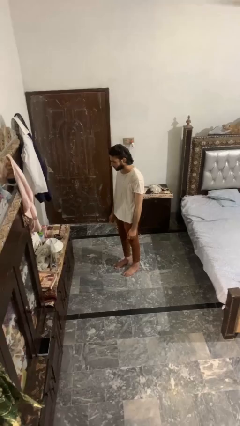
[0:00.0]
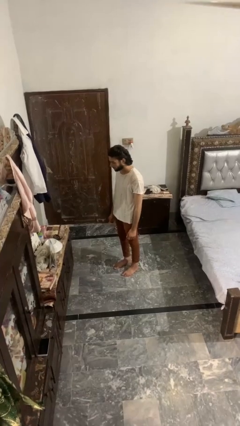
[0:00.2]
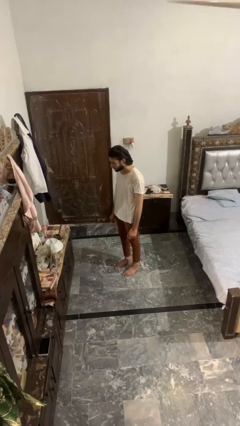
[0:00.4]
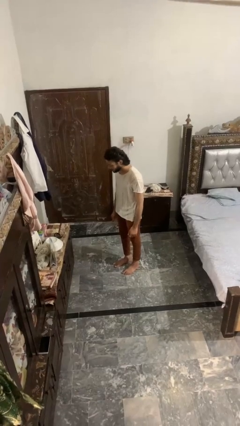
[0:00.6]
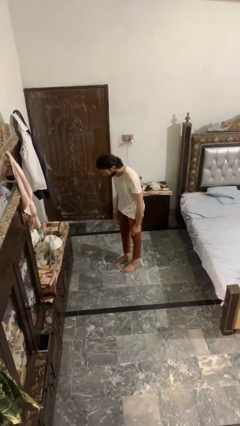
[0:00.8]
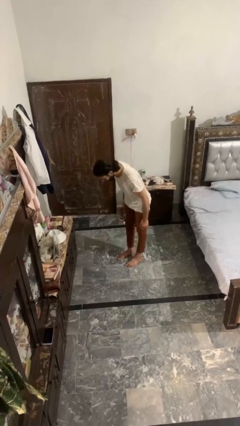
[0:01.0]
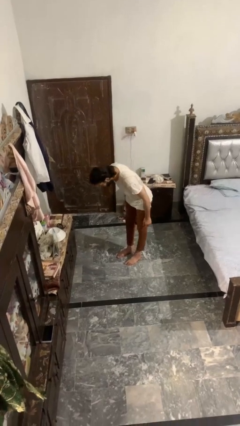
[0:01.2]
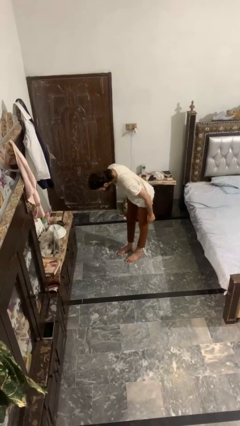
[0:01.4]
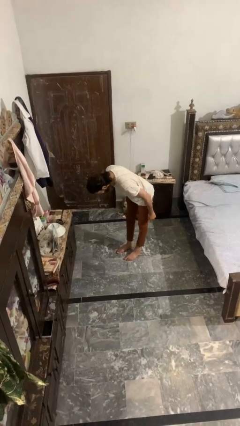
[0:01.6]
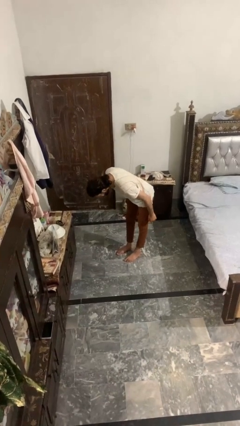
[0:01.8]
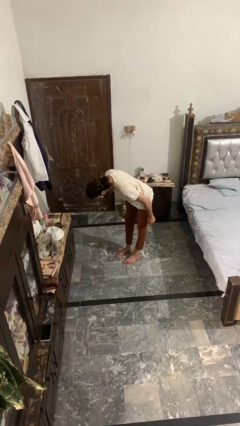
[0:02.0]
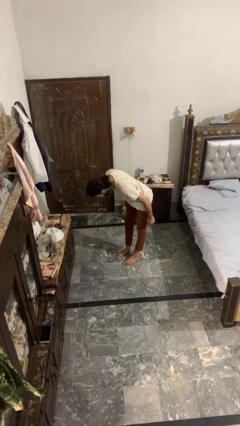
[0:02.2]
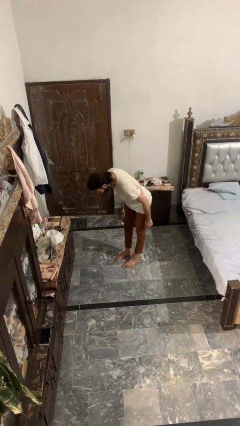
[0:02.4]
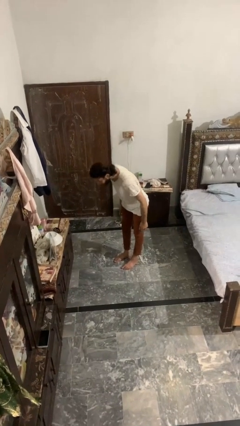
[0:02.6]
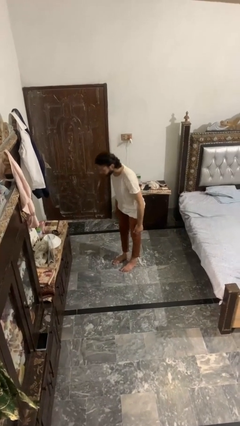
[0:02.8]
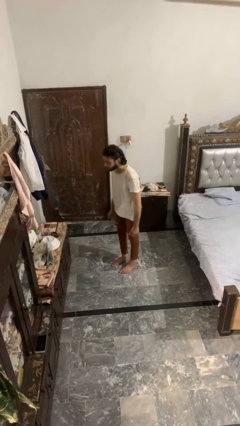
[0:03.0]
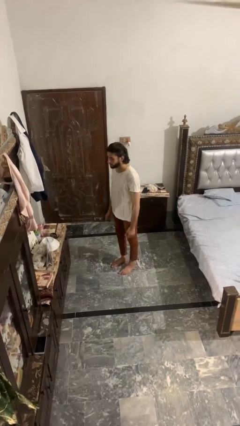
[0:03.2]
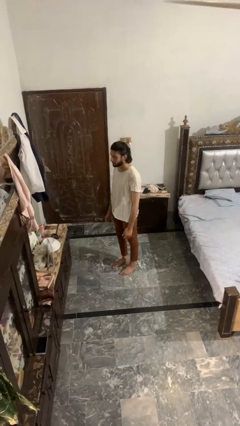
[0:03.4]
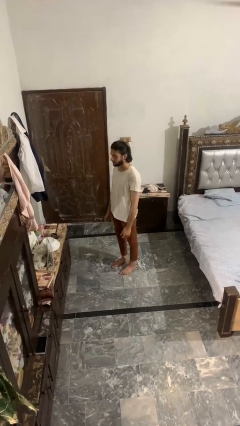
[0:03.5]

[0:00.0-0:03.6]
person bows

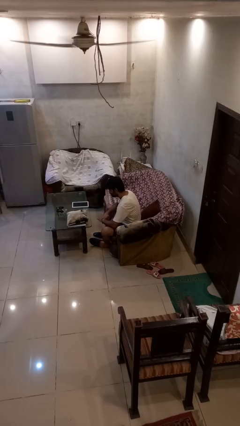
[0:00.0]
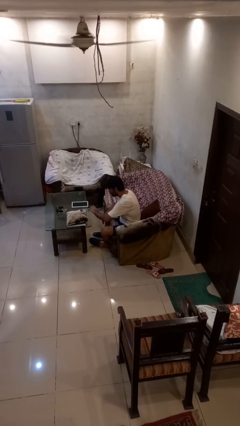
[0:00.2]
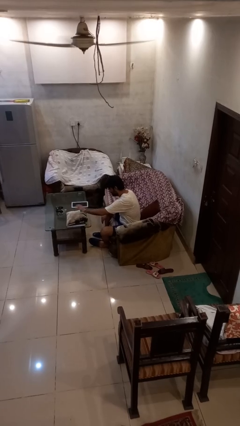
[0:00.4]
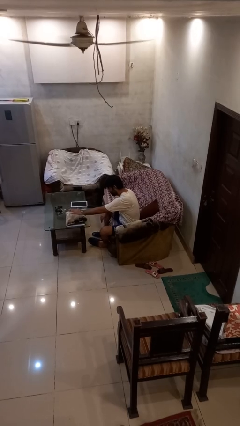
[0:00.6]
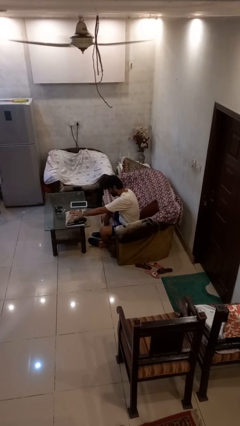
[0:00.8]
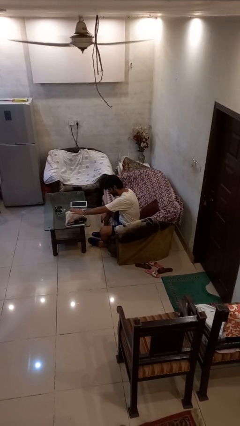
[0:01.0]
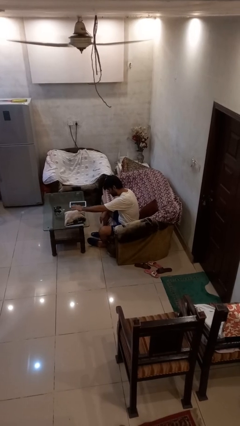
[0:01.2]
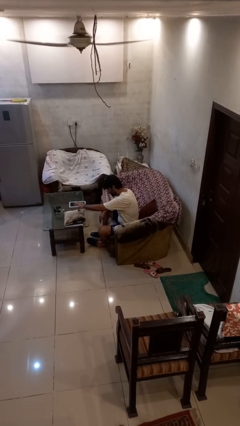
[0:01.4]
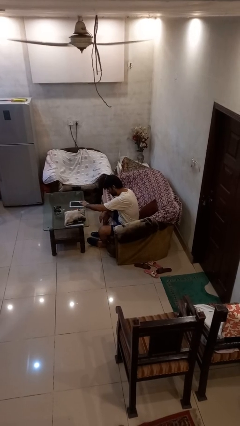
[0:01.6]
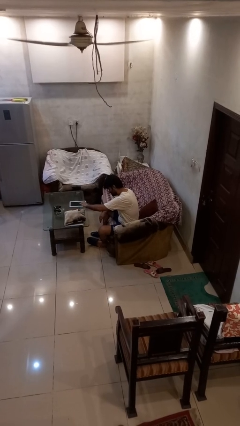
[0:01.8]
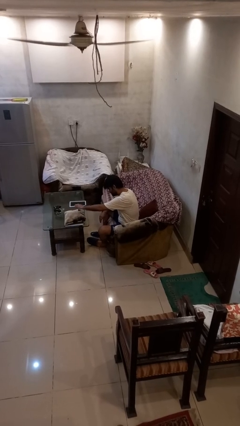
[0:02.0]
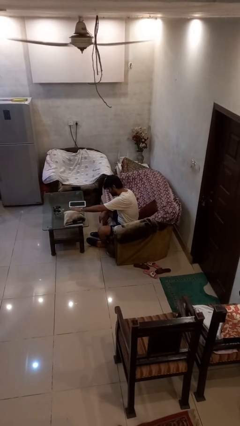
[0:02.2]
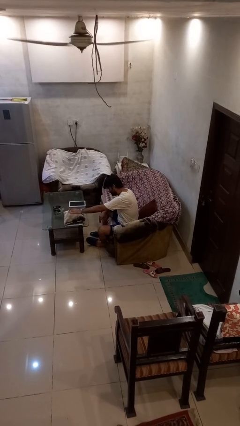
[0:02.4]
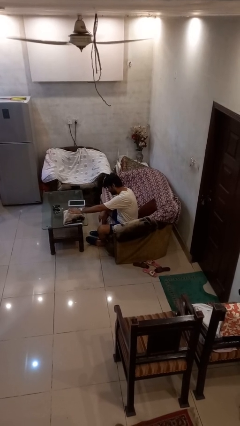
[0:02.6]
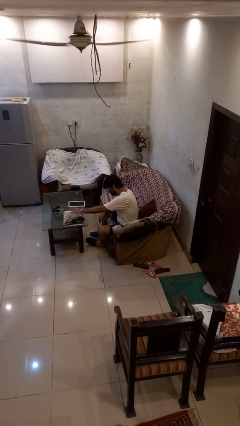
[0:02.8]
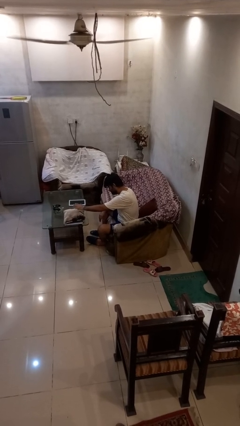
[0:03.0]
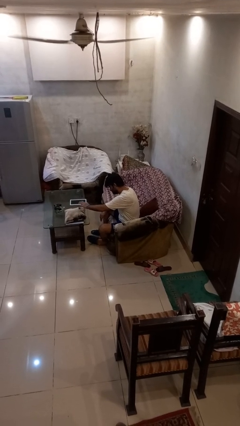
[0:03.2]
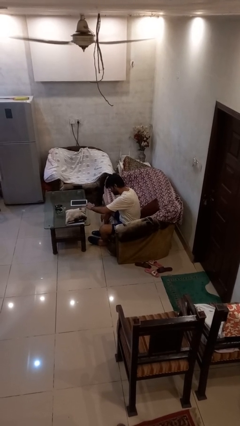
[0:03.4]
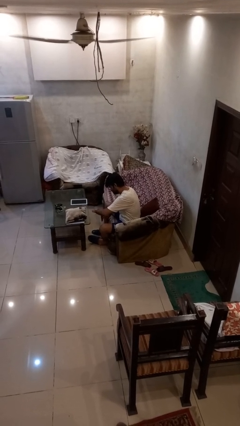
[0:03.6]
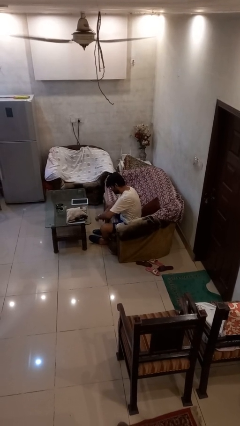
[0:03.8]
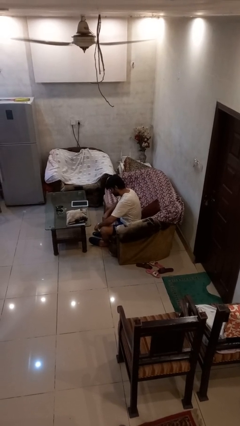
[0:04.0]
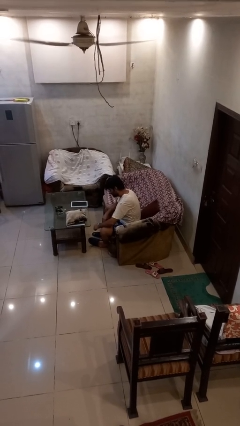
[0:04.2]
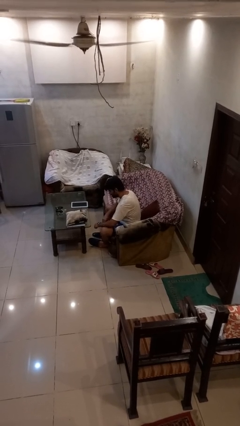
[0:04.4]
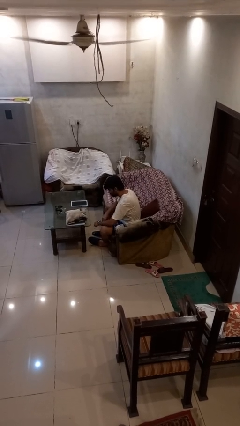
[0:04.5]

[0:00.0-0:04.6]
person waves hand over object

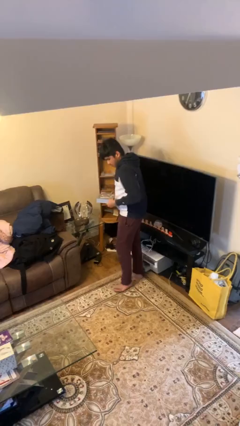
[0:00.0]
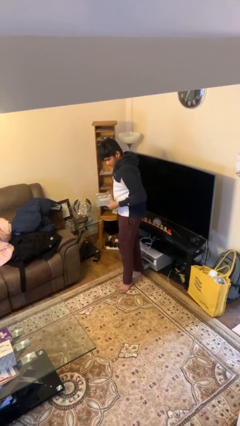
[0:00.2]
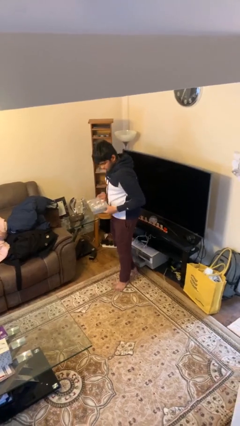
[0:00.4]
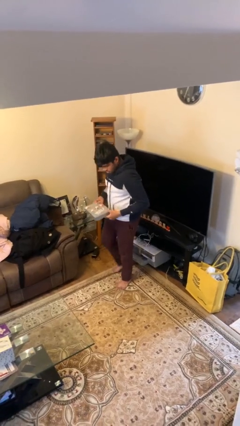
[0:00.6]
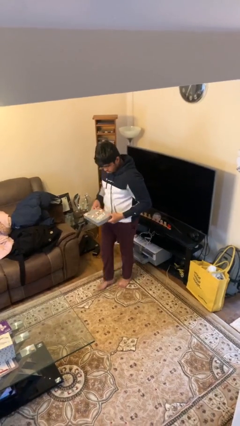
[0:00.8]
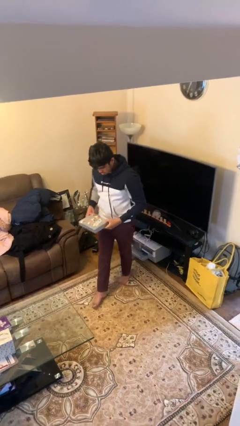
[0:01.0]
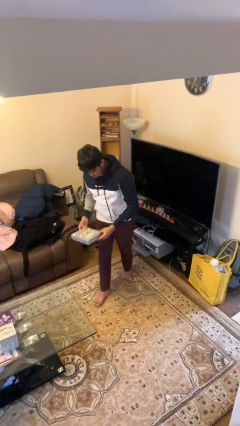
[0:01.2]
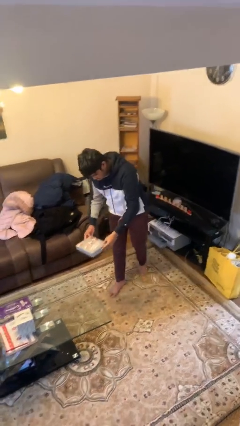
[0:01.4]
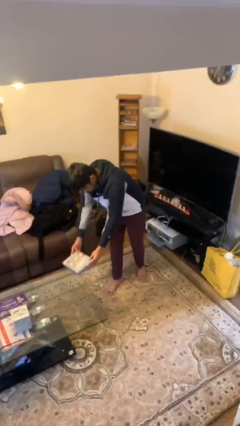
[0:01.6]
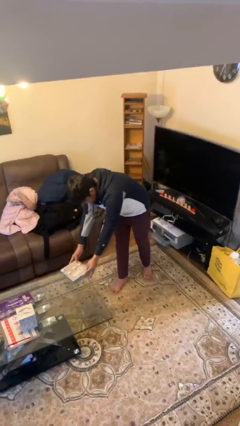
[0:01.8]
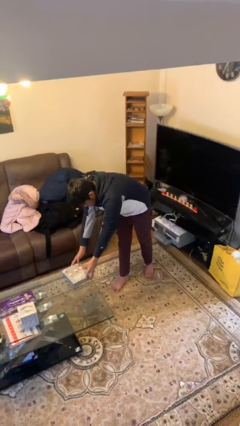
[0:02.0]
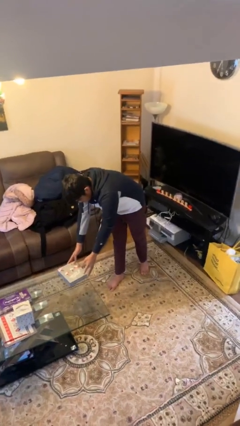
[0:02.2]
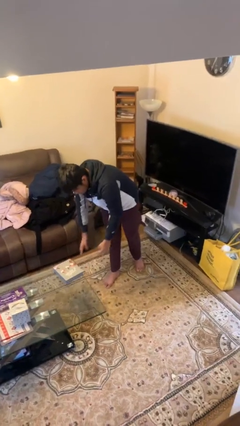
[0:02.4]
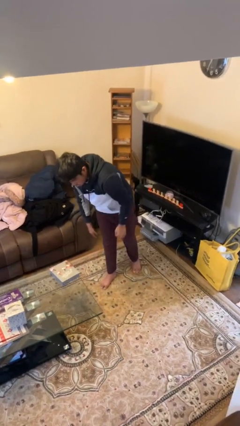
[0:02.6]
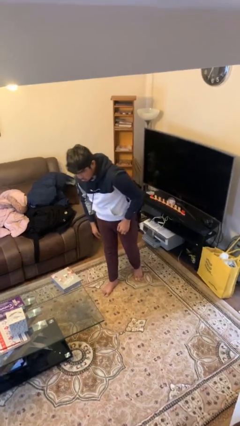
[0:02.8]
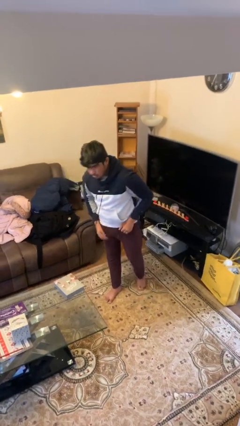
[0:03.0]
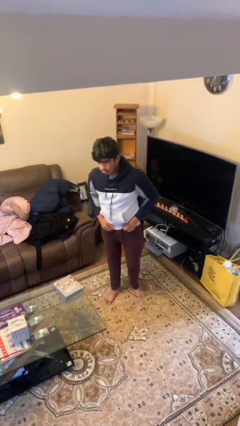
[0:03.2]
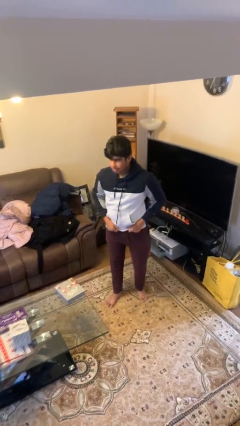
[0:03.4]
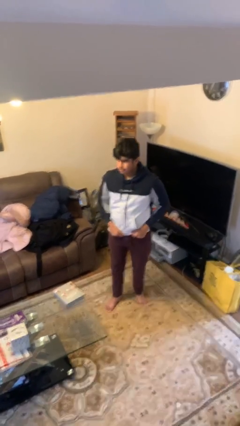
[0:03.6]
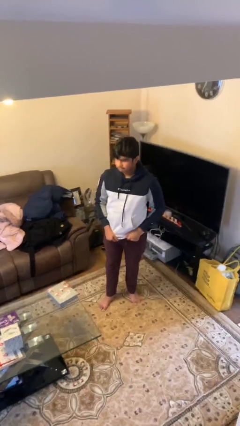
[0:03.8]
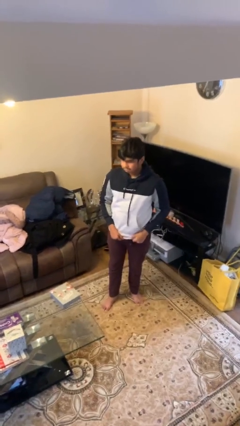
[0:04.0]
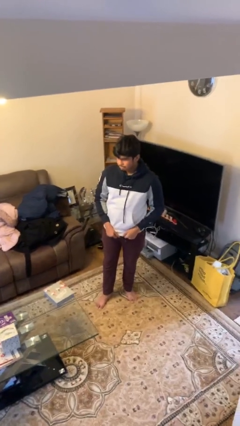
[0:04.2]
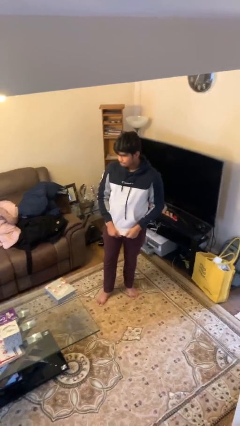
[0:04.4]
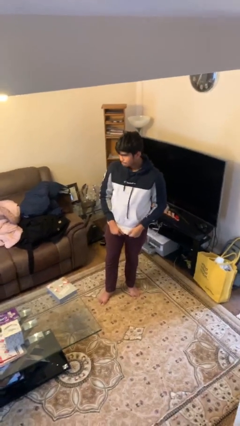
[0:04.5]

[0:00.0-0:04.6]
person puts down object on table

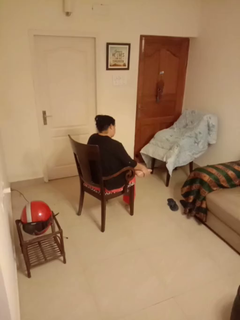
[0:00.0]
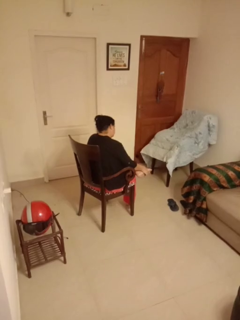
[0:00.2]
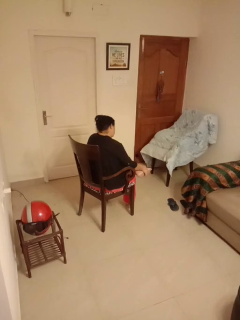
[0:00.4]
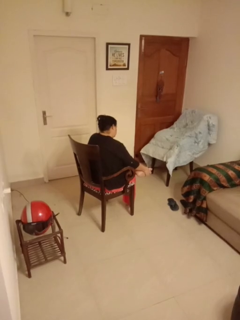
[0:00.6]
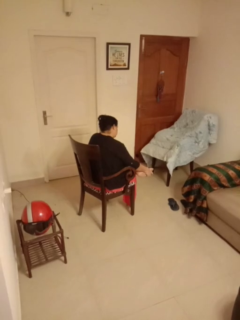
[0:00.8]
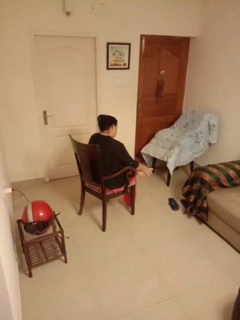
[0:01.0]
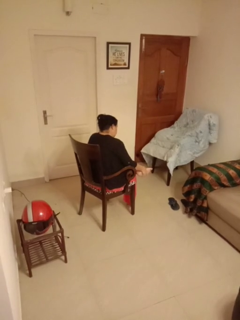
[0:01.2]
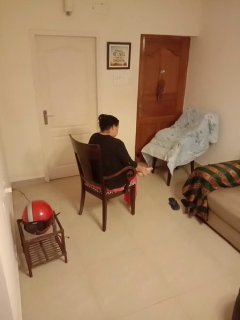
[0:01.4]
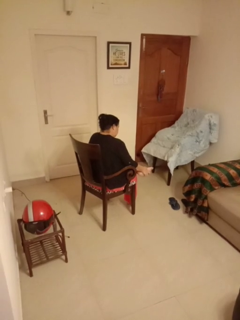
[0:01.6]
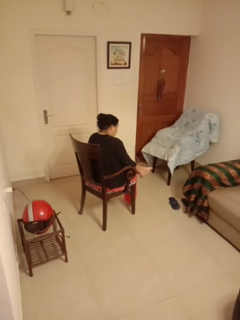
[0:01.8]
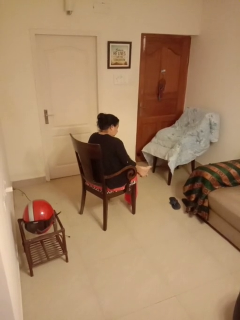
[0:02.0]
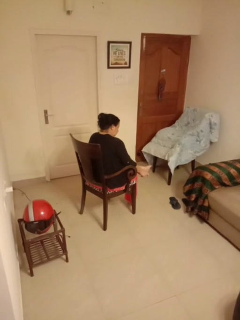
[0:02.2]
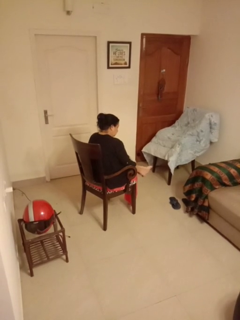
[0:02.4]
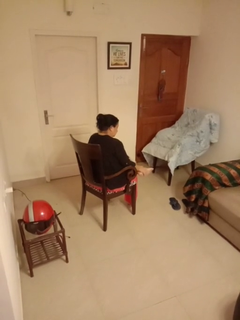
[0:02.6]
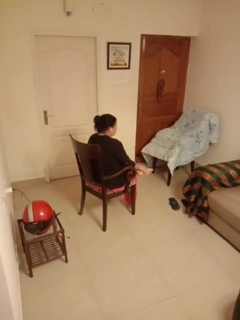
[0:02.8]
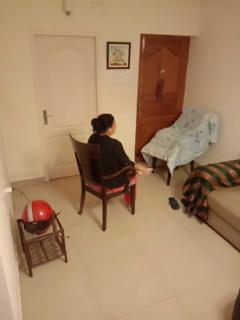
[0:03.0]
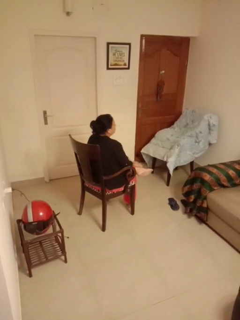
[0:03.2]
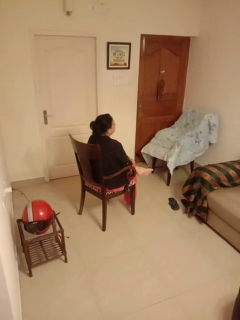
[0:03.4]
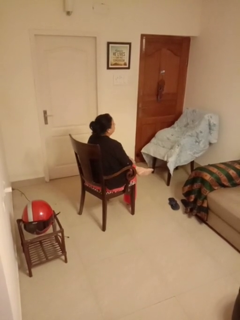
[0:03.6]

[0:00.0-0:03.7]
person rubs foot

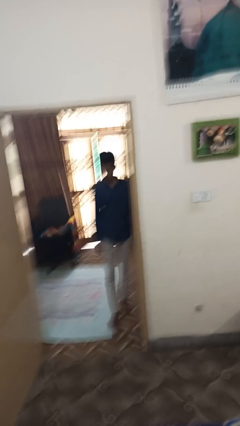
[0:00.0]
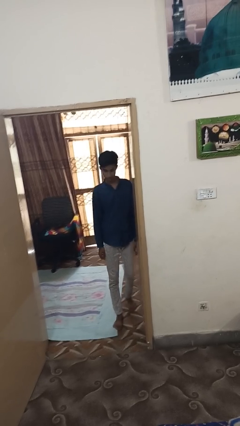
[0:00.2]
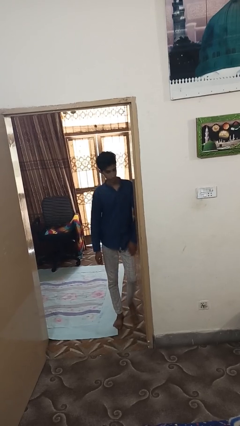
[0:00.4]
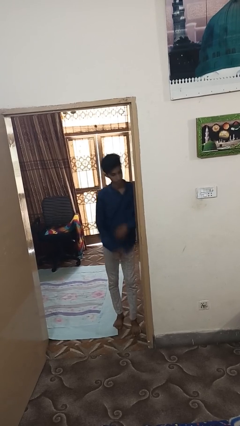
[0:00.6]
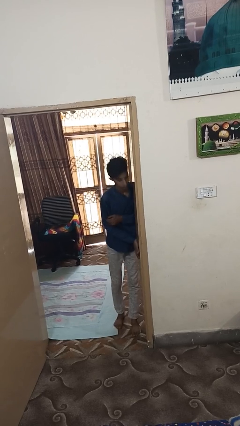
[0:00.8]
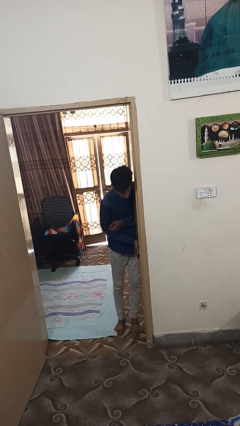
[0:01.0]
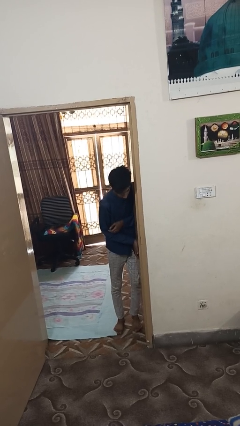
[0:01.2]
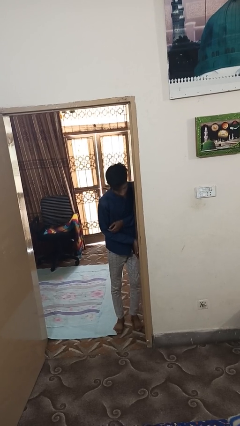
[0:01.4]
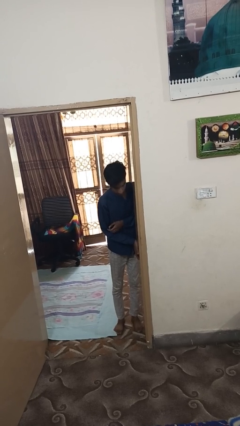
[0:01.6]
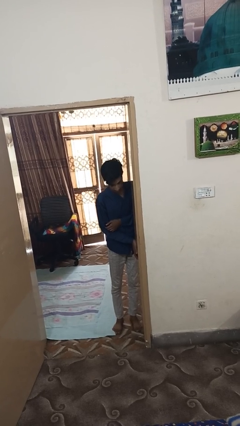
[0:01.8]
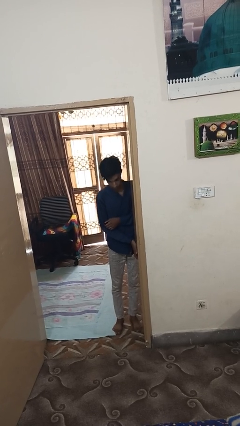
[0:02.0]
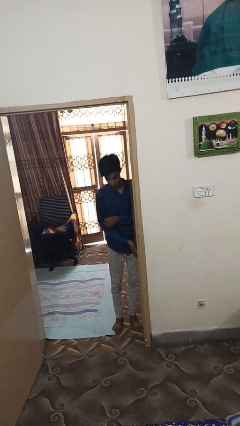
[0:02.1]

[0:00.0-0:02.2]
person bumps into wall
